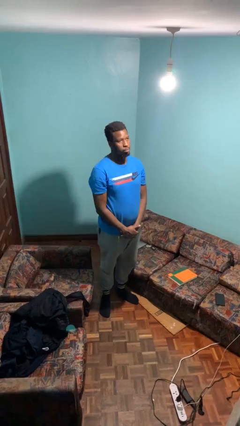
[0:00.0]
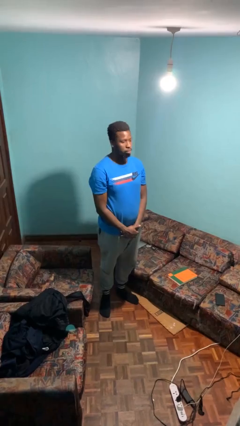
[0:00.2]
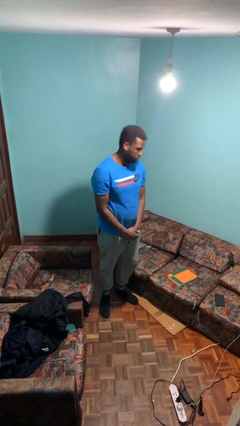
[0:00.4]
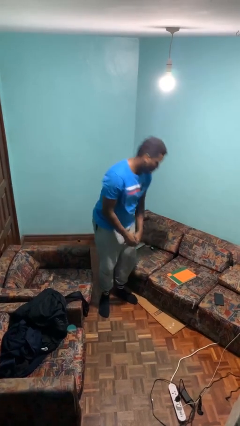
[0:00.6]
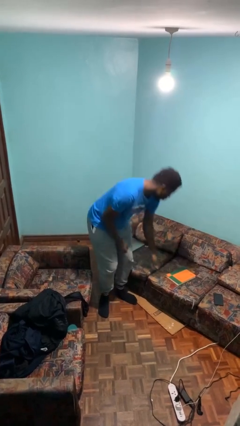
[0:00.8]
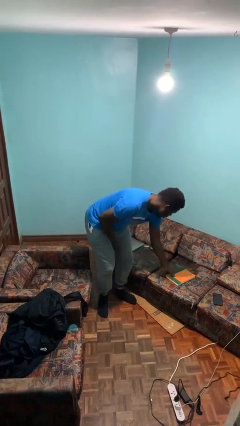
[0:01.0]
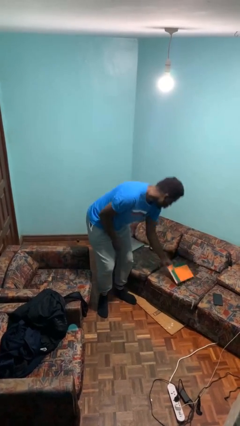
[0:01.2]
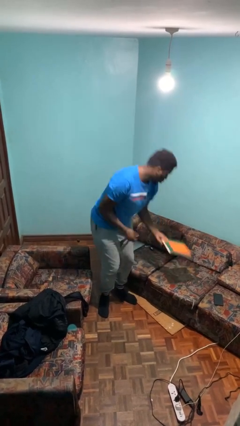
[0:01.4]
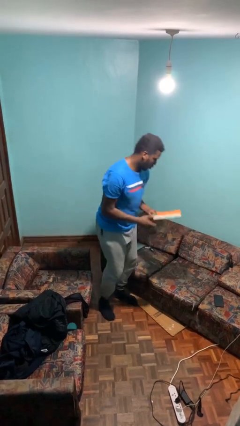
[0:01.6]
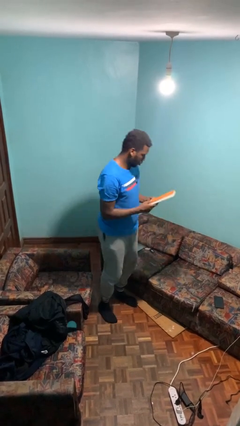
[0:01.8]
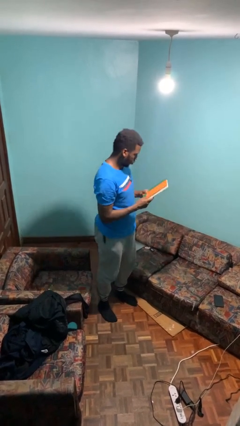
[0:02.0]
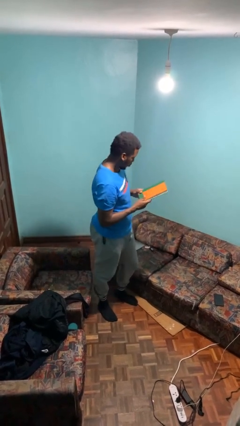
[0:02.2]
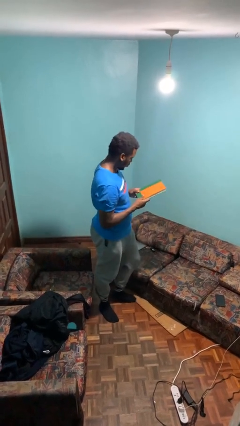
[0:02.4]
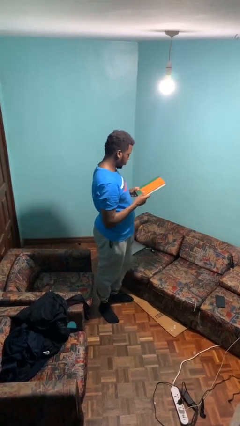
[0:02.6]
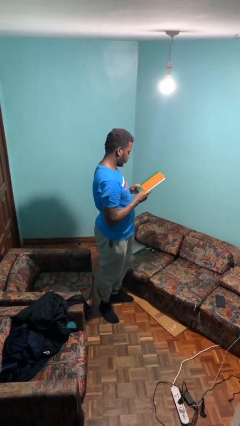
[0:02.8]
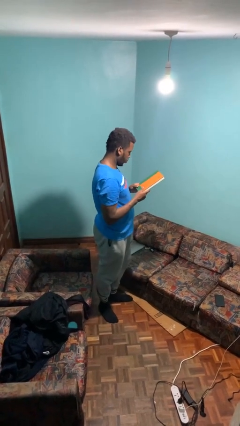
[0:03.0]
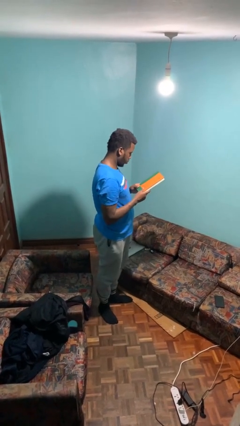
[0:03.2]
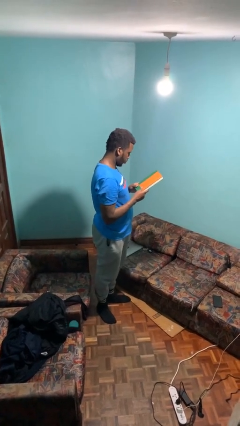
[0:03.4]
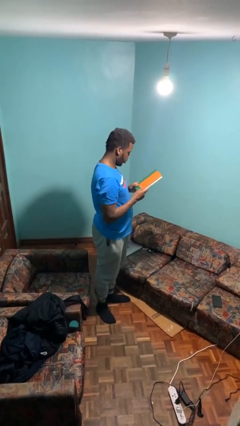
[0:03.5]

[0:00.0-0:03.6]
person picks up object from couch

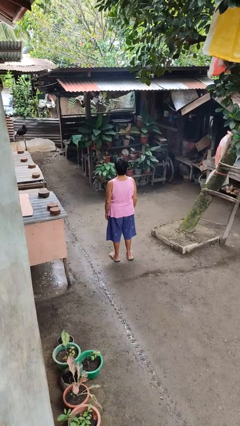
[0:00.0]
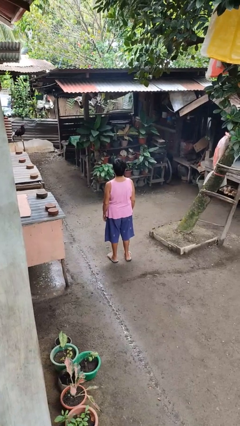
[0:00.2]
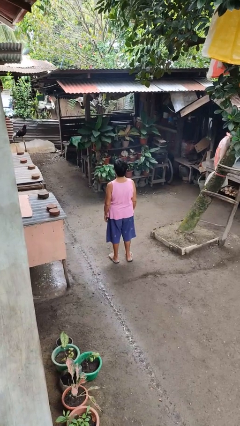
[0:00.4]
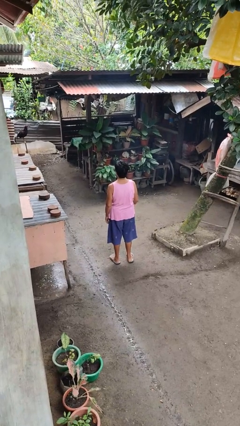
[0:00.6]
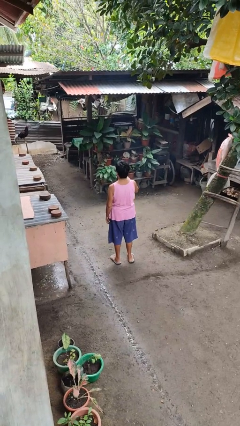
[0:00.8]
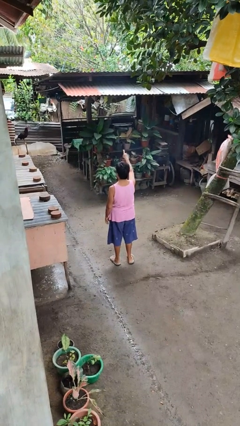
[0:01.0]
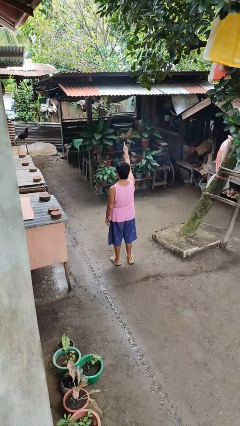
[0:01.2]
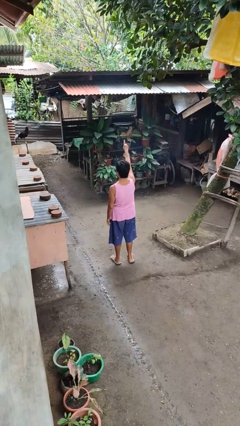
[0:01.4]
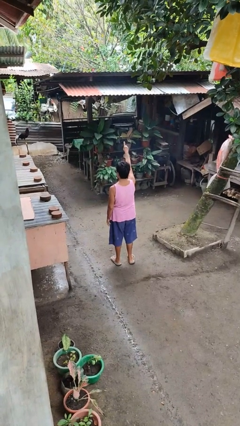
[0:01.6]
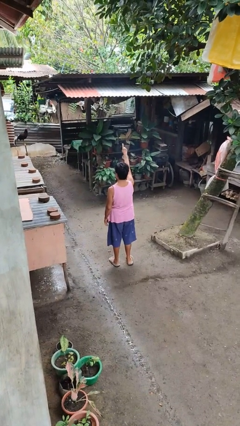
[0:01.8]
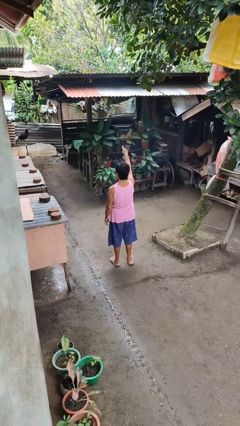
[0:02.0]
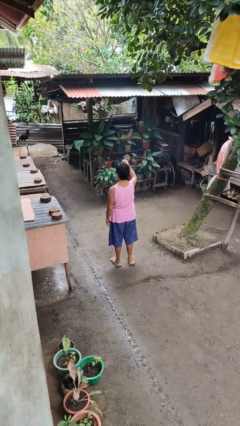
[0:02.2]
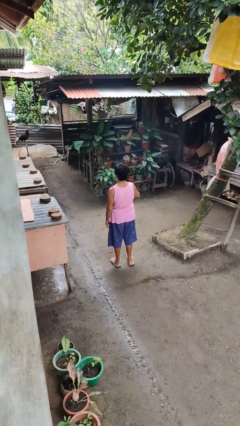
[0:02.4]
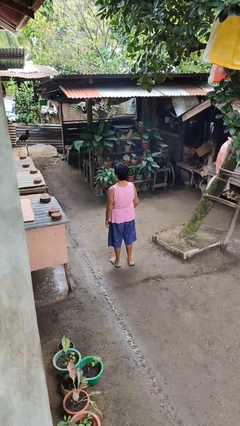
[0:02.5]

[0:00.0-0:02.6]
person points at person

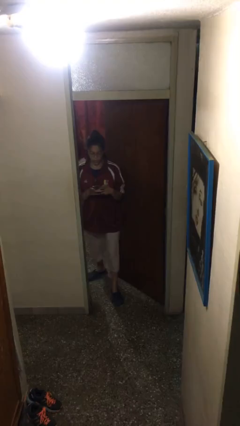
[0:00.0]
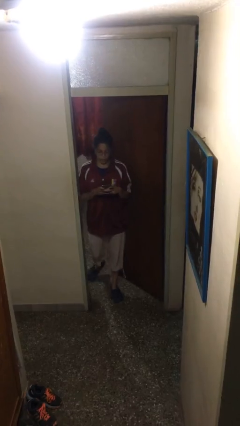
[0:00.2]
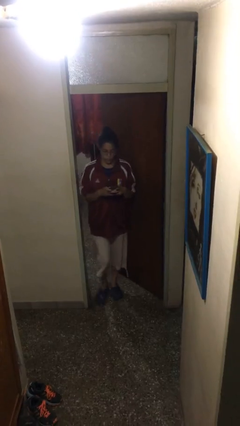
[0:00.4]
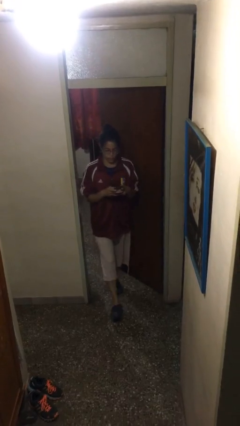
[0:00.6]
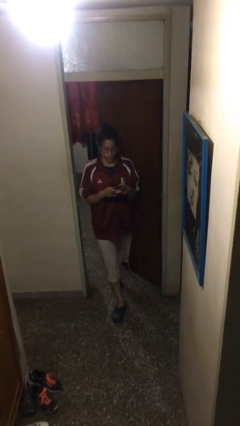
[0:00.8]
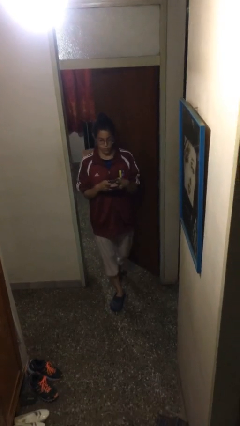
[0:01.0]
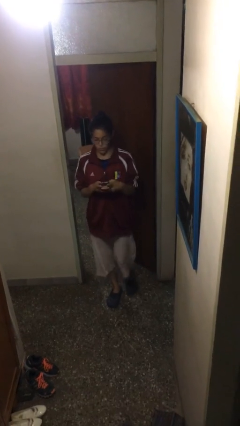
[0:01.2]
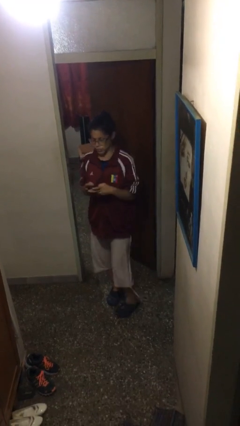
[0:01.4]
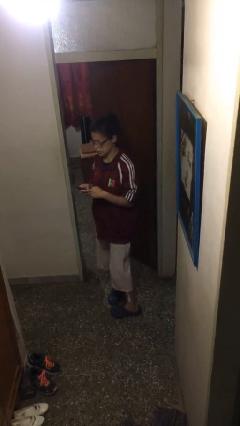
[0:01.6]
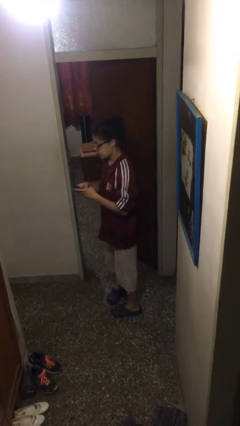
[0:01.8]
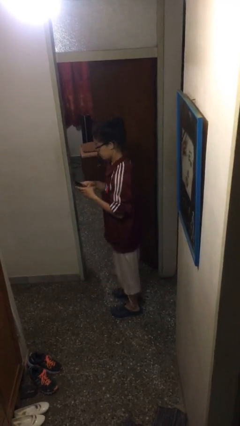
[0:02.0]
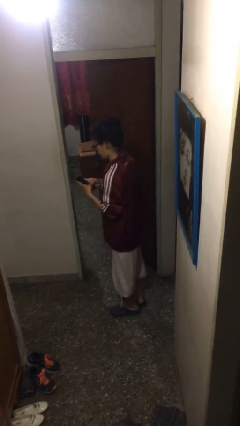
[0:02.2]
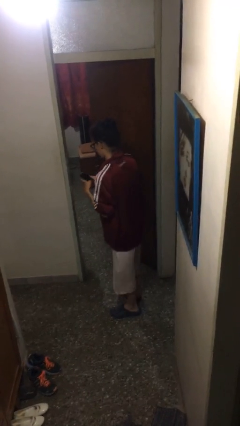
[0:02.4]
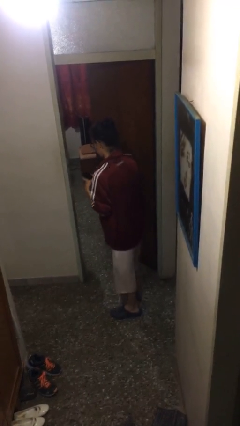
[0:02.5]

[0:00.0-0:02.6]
person enters scene through structure

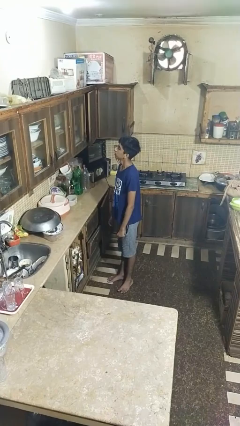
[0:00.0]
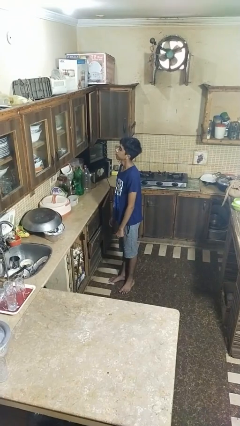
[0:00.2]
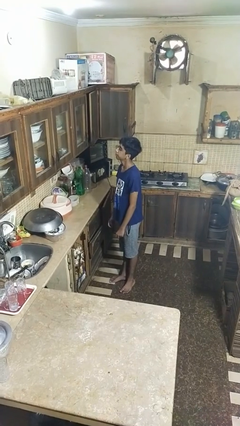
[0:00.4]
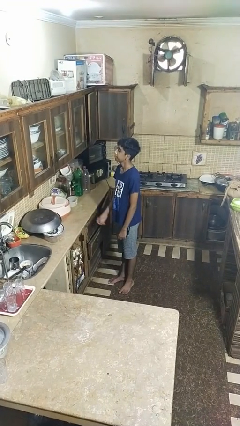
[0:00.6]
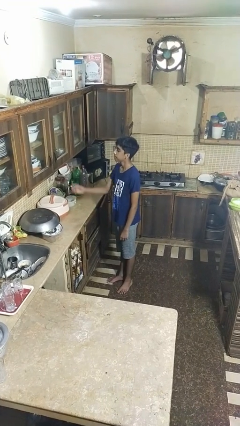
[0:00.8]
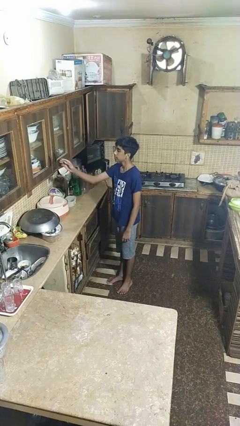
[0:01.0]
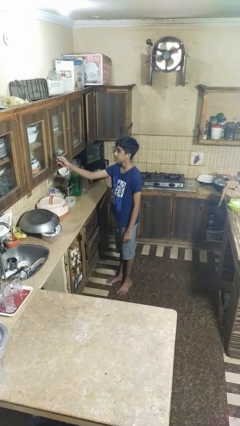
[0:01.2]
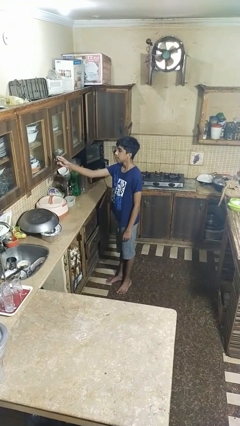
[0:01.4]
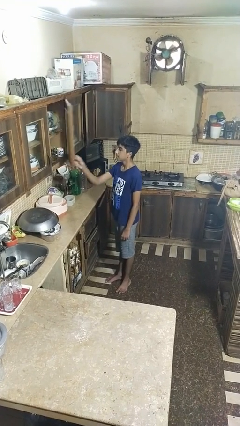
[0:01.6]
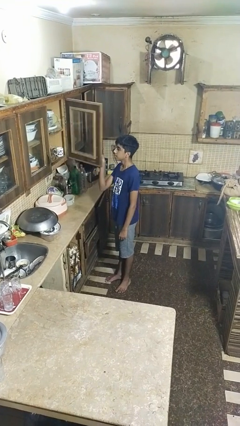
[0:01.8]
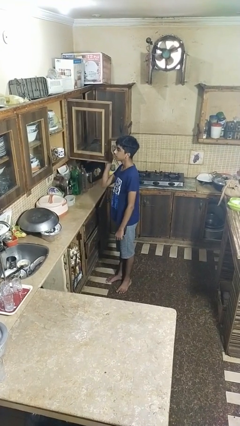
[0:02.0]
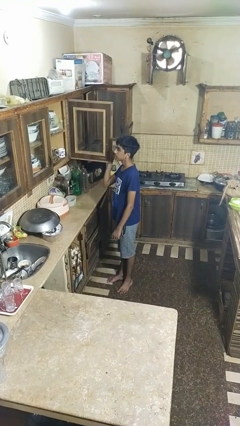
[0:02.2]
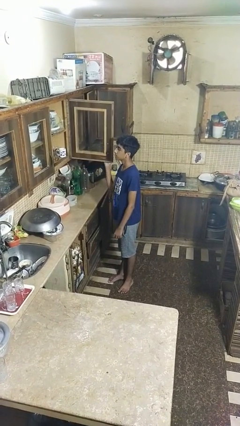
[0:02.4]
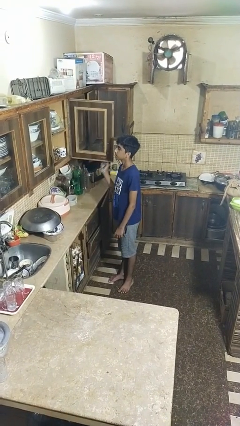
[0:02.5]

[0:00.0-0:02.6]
person opens cabinet

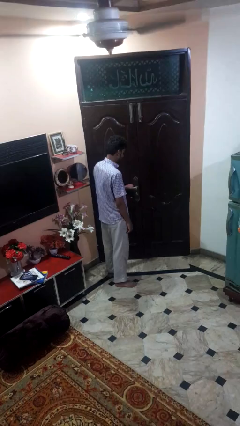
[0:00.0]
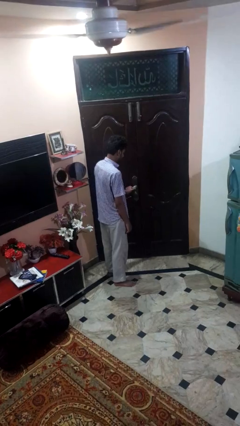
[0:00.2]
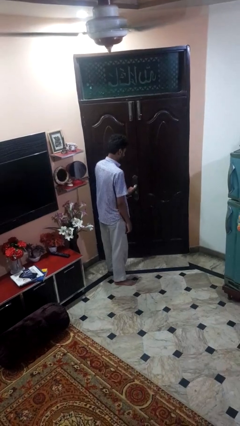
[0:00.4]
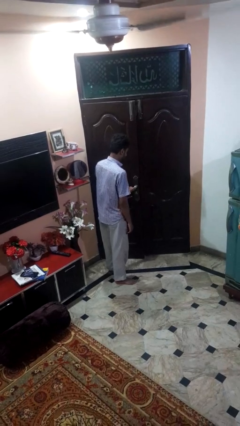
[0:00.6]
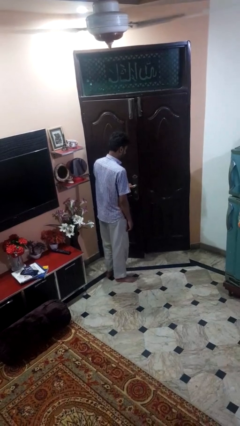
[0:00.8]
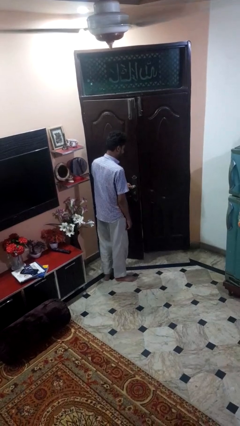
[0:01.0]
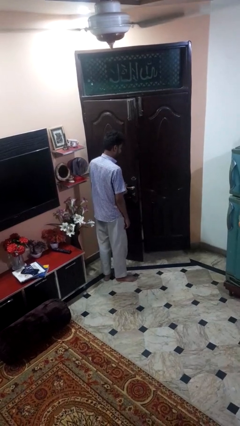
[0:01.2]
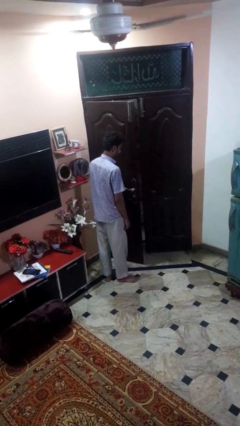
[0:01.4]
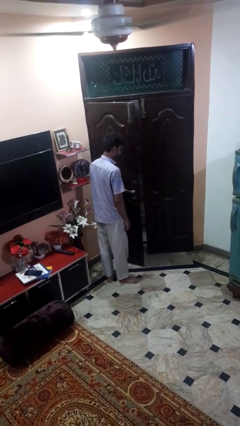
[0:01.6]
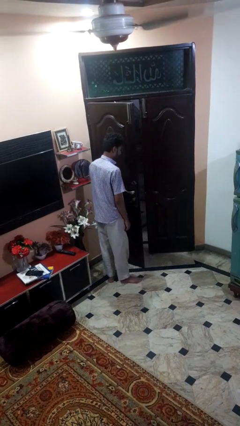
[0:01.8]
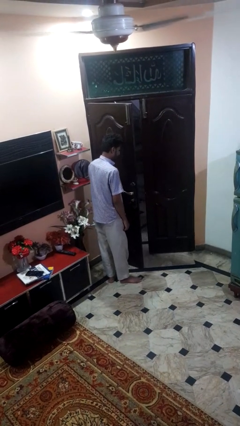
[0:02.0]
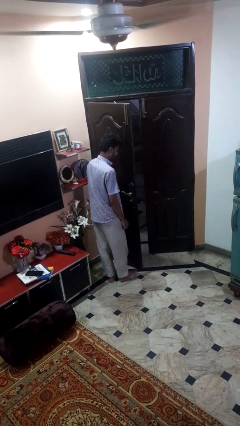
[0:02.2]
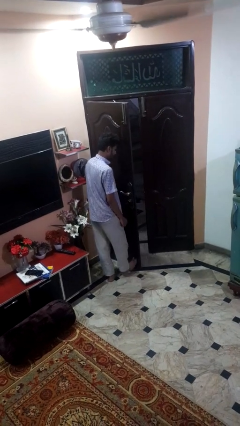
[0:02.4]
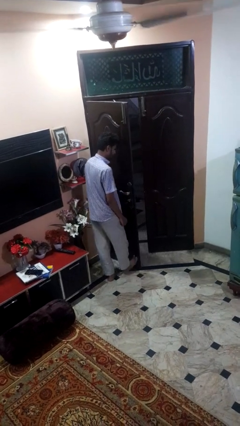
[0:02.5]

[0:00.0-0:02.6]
person opens facility door

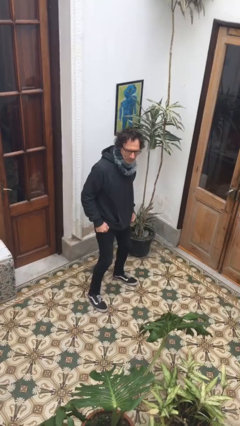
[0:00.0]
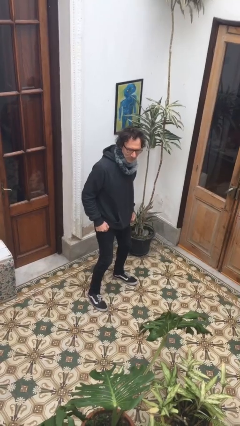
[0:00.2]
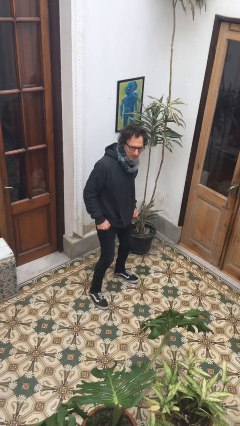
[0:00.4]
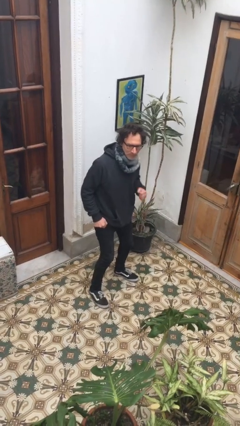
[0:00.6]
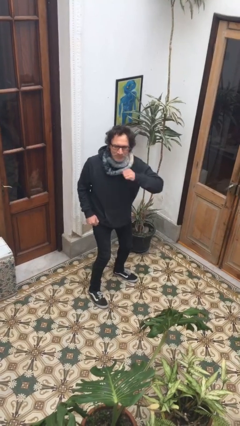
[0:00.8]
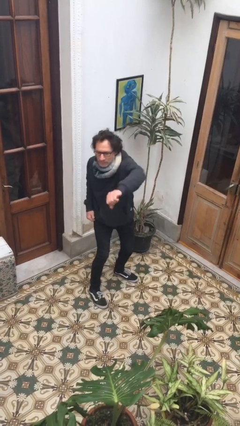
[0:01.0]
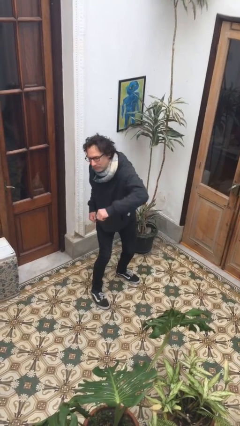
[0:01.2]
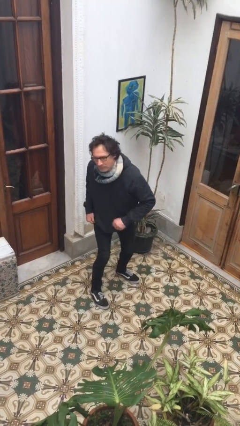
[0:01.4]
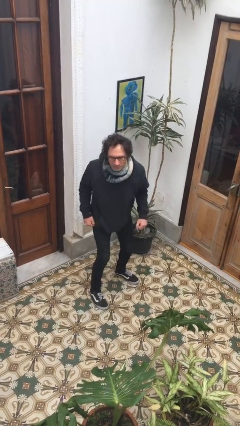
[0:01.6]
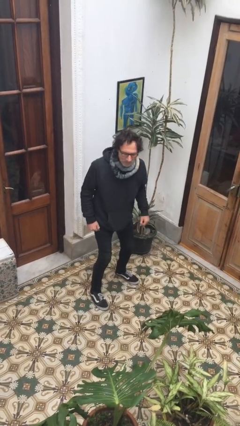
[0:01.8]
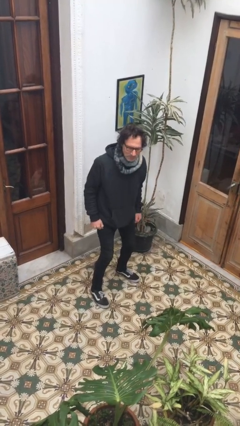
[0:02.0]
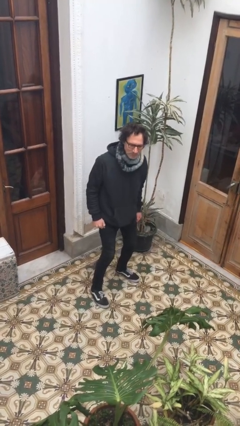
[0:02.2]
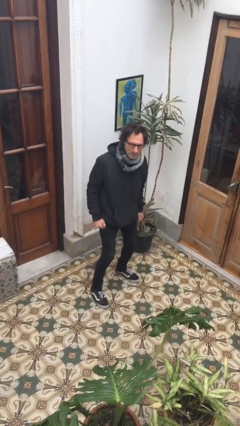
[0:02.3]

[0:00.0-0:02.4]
person karate chop

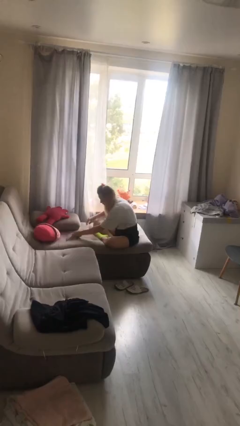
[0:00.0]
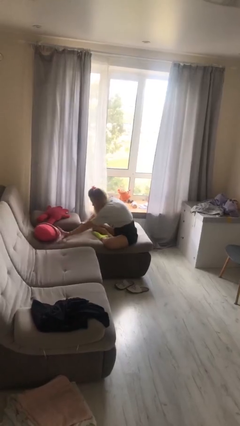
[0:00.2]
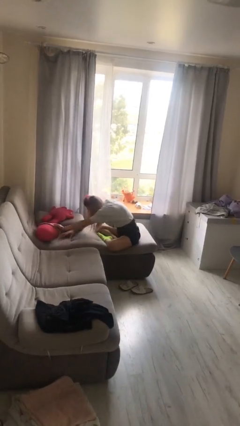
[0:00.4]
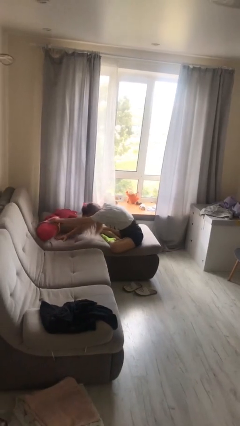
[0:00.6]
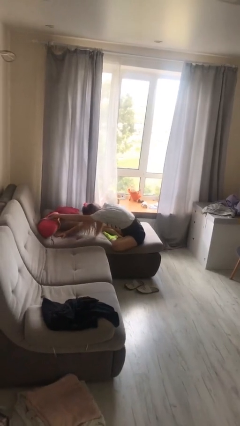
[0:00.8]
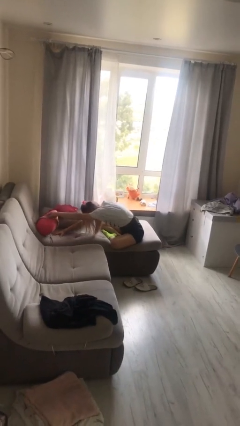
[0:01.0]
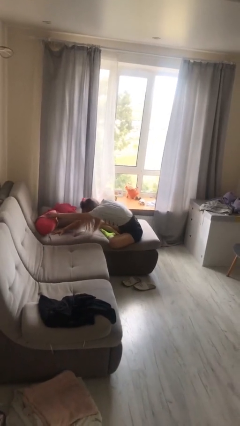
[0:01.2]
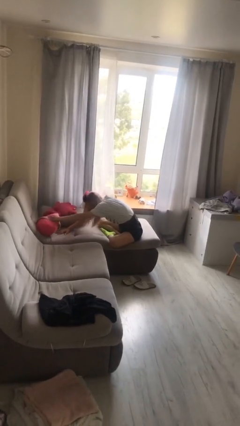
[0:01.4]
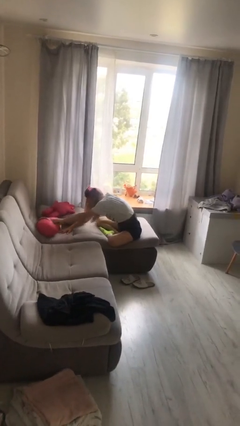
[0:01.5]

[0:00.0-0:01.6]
person searches in couch
